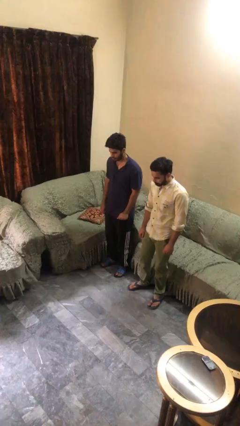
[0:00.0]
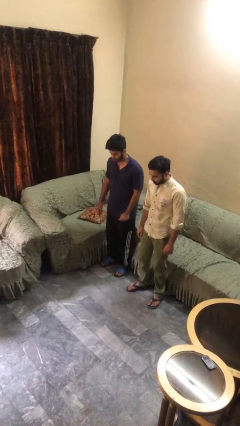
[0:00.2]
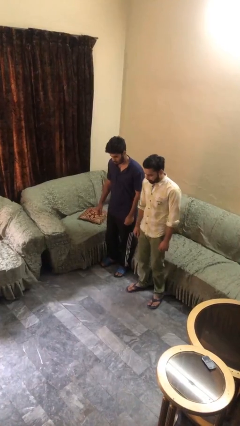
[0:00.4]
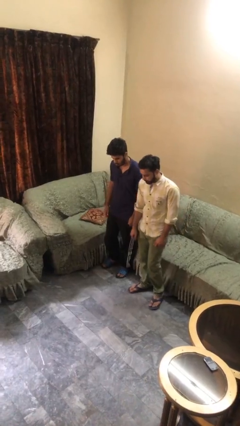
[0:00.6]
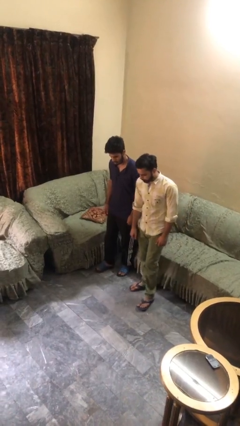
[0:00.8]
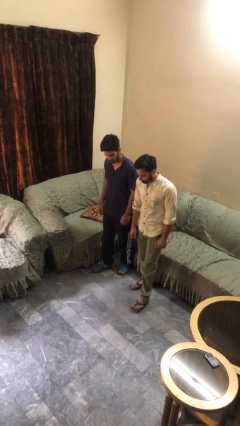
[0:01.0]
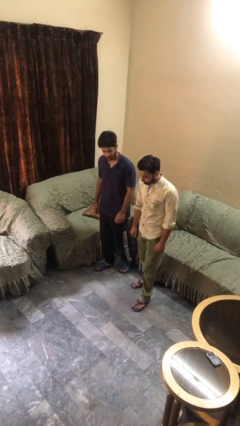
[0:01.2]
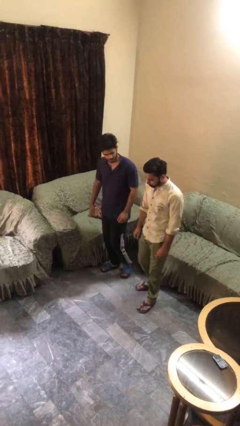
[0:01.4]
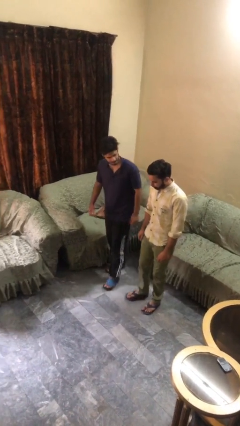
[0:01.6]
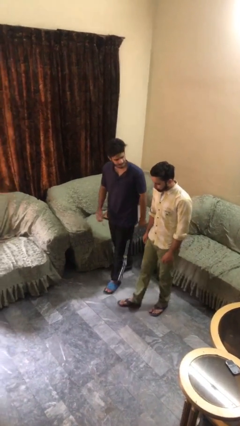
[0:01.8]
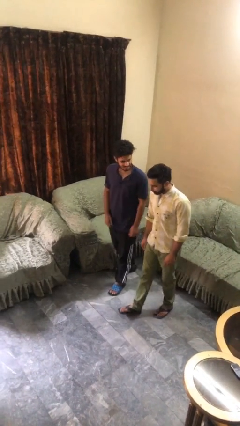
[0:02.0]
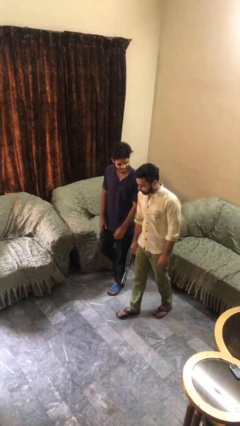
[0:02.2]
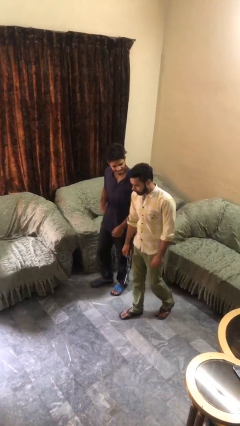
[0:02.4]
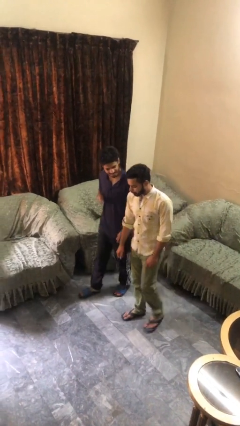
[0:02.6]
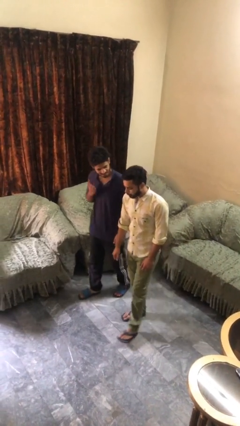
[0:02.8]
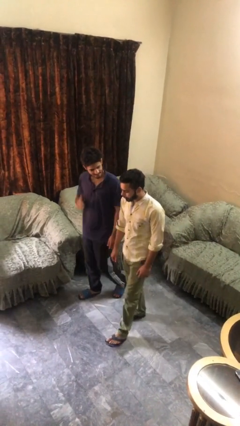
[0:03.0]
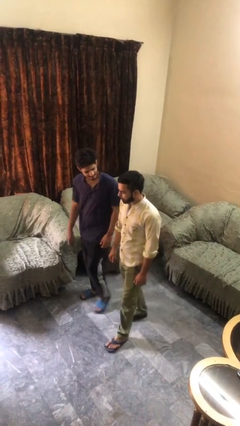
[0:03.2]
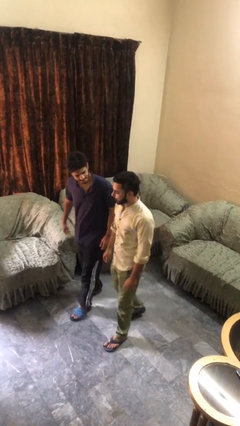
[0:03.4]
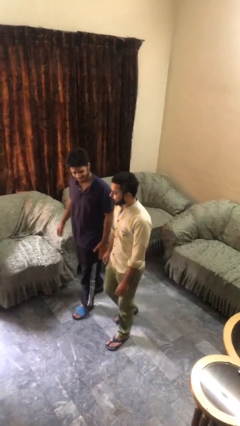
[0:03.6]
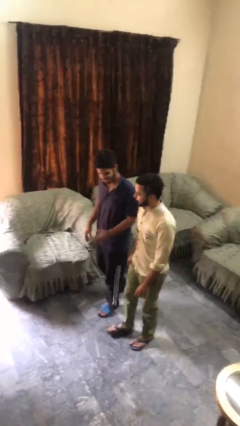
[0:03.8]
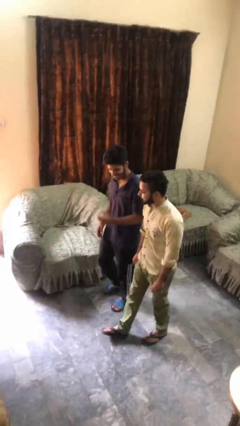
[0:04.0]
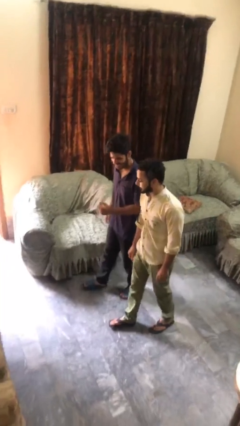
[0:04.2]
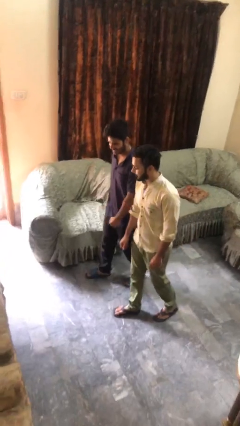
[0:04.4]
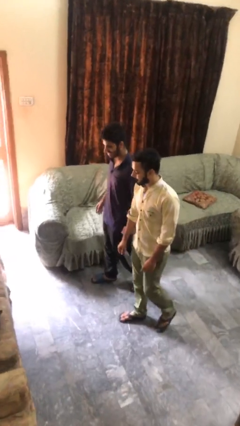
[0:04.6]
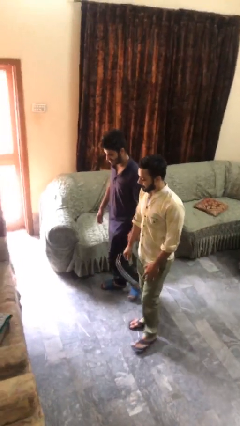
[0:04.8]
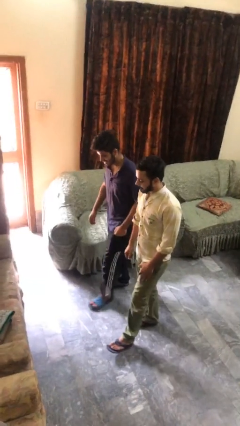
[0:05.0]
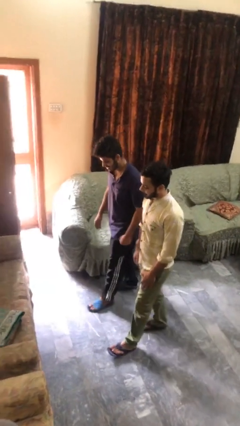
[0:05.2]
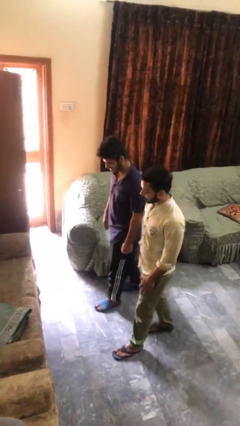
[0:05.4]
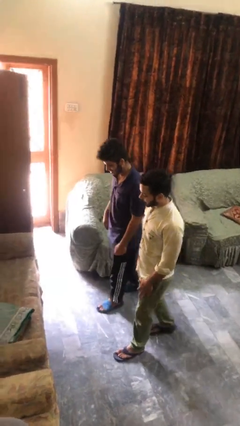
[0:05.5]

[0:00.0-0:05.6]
person talks to person

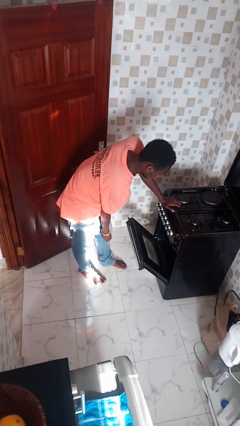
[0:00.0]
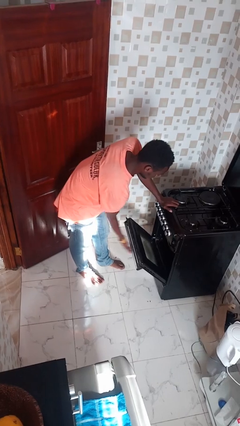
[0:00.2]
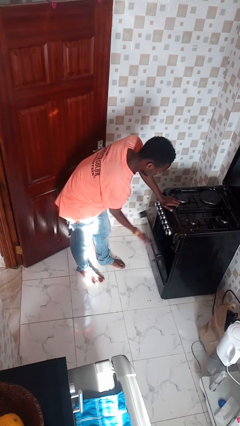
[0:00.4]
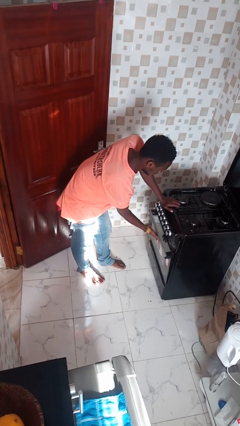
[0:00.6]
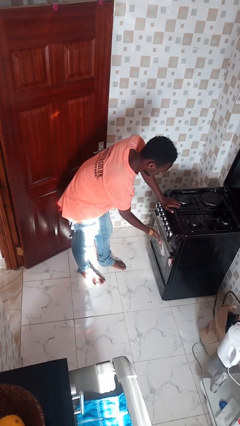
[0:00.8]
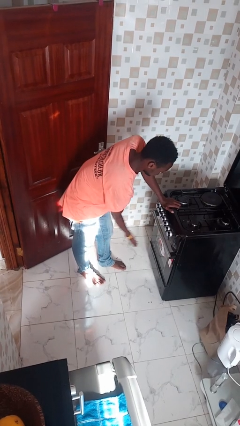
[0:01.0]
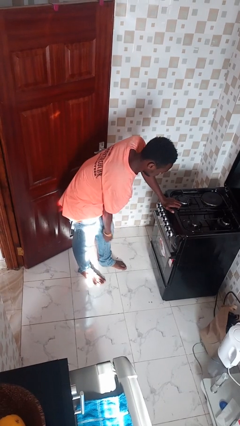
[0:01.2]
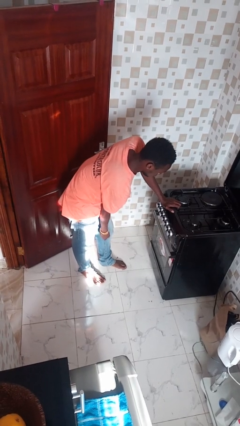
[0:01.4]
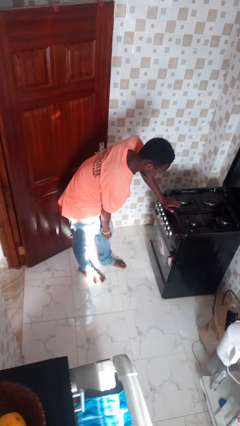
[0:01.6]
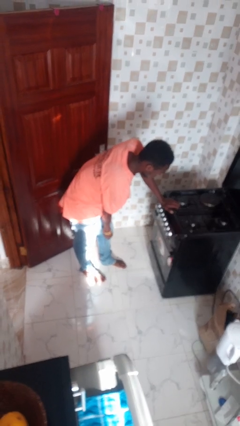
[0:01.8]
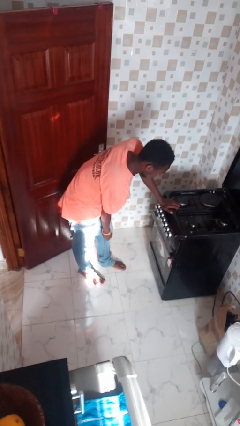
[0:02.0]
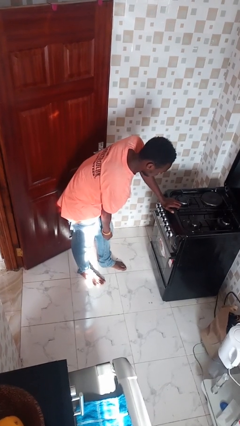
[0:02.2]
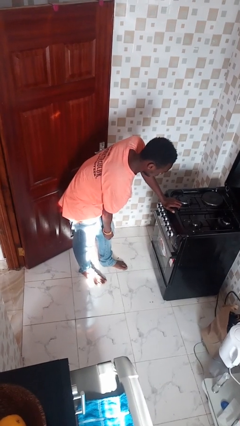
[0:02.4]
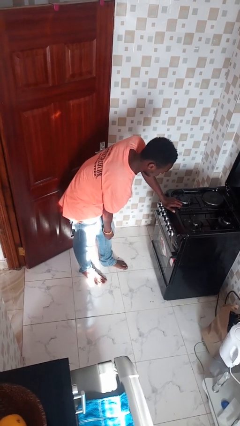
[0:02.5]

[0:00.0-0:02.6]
person closes oven door

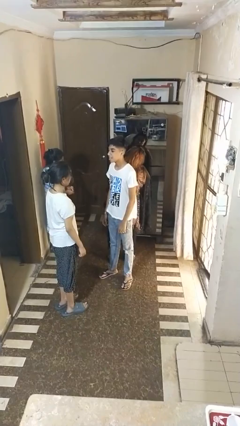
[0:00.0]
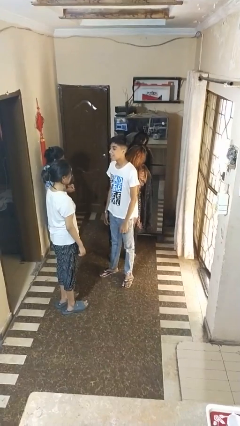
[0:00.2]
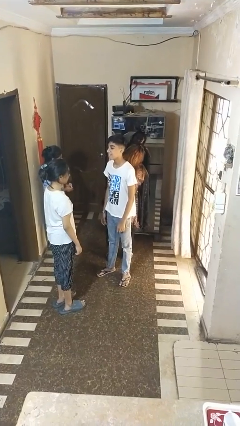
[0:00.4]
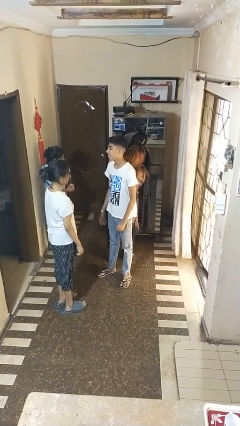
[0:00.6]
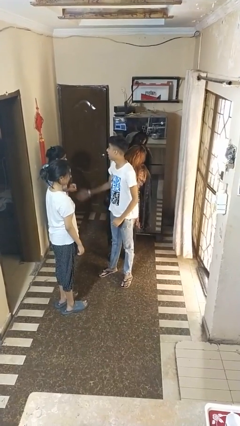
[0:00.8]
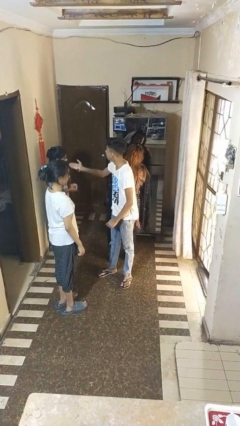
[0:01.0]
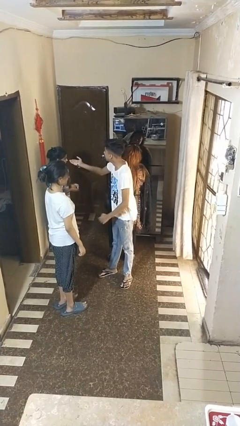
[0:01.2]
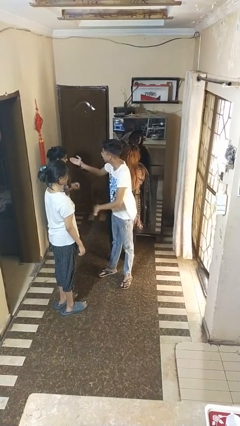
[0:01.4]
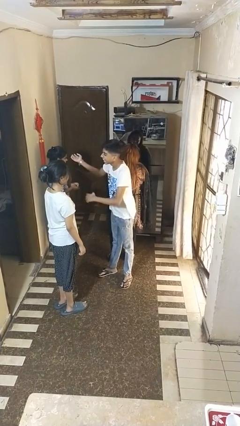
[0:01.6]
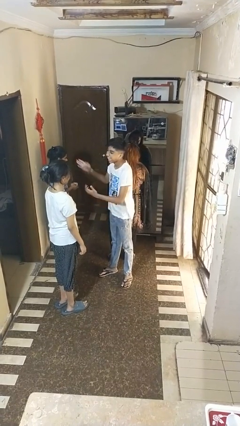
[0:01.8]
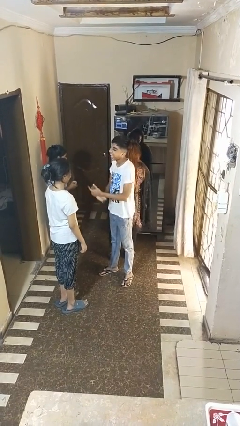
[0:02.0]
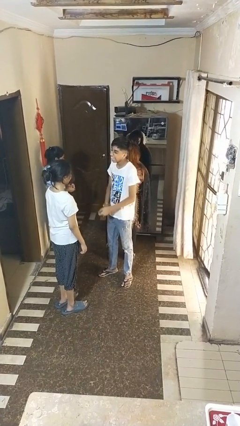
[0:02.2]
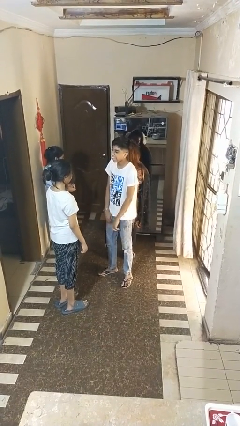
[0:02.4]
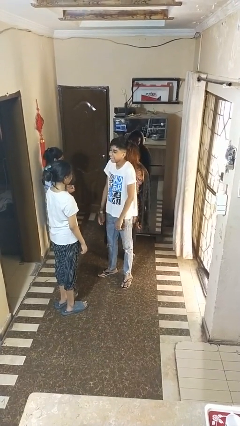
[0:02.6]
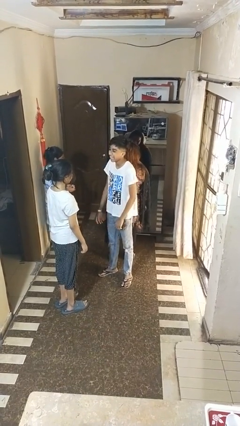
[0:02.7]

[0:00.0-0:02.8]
person laughs with person

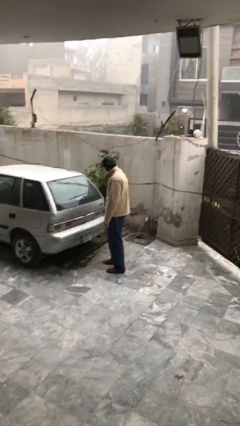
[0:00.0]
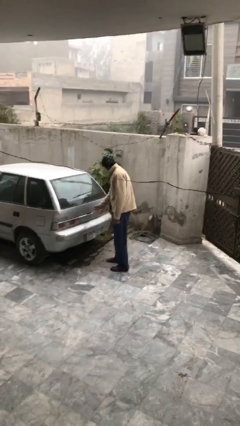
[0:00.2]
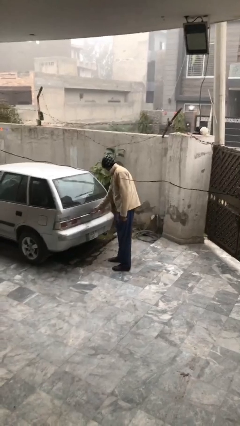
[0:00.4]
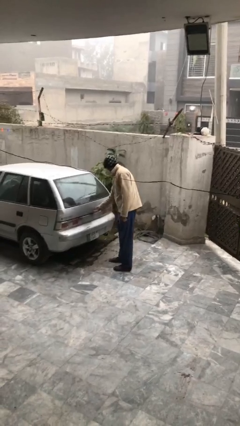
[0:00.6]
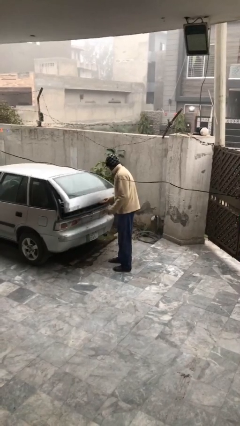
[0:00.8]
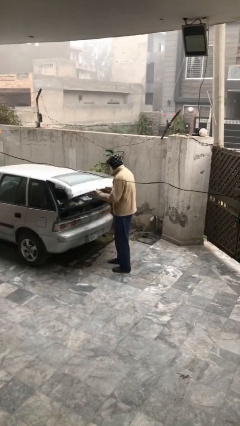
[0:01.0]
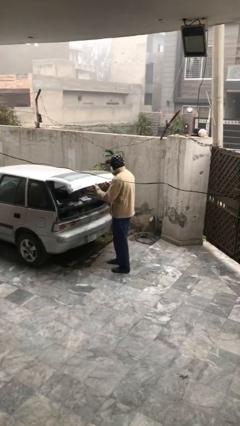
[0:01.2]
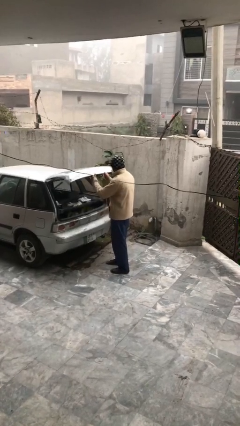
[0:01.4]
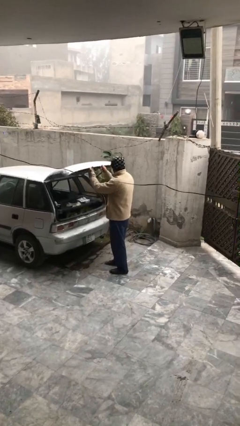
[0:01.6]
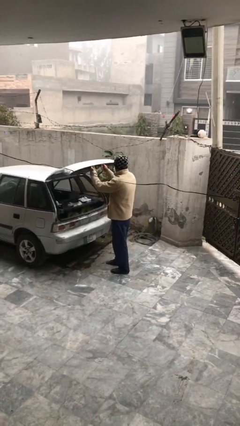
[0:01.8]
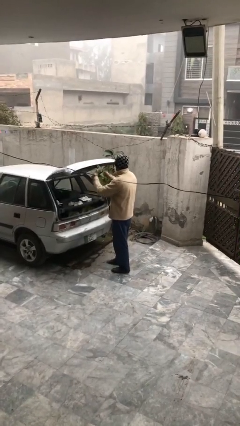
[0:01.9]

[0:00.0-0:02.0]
person opens car trunk

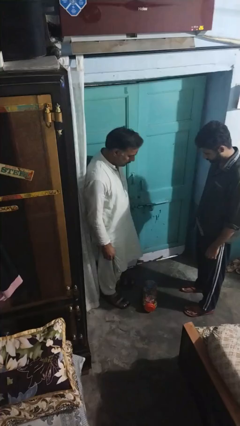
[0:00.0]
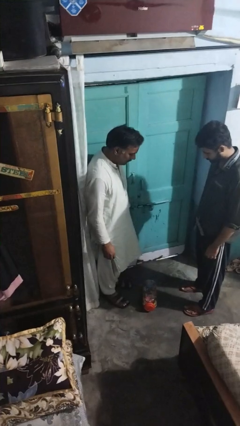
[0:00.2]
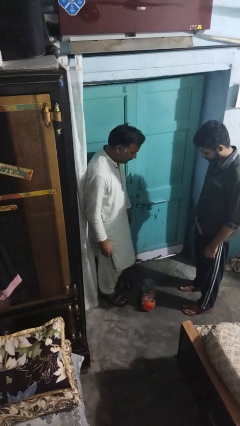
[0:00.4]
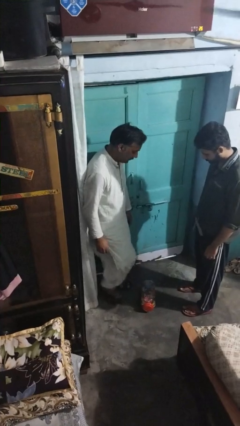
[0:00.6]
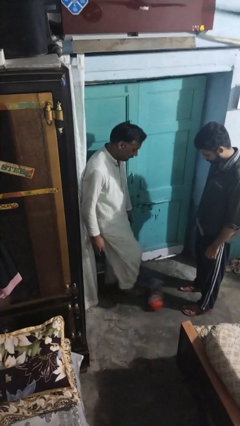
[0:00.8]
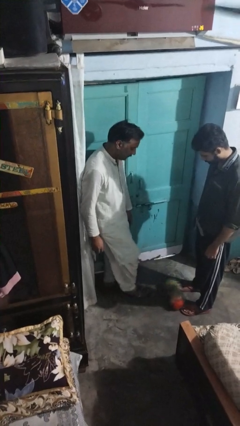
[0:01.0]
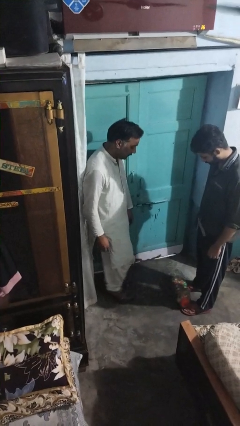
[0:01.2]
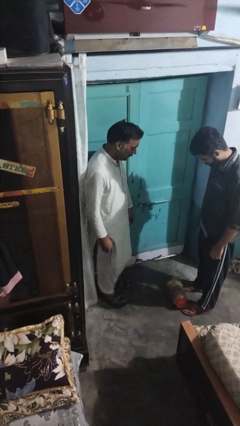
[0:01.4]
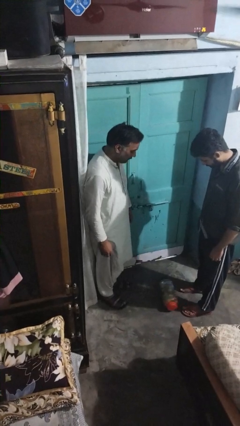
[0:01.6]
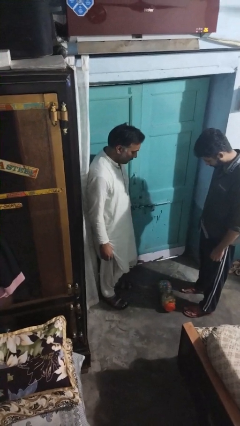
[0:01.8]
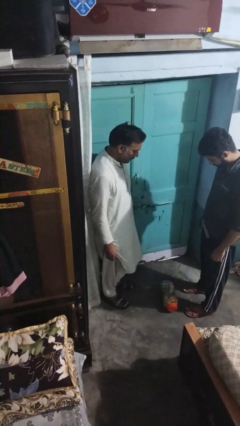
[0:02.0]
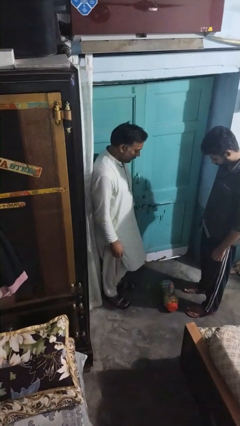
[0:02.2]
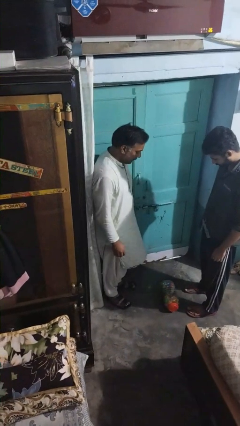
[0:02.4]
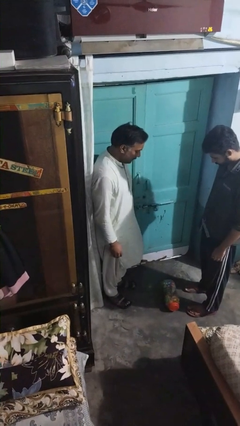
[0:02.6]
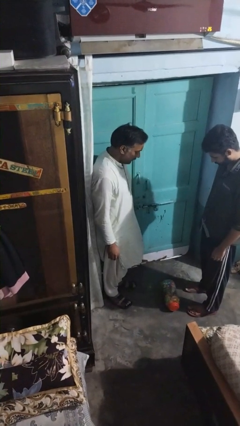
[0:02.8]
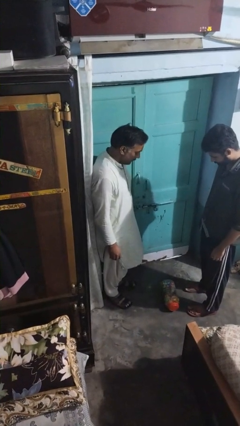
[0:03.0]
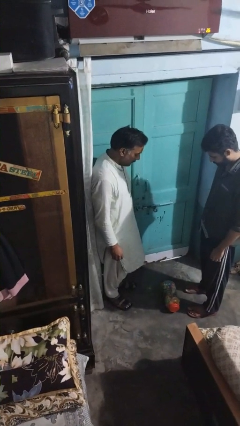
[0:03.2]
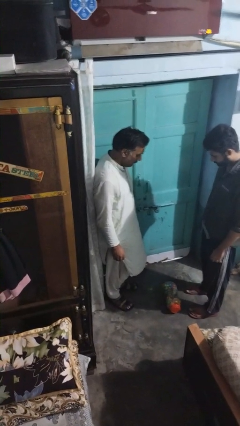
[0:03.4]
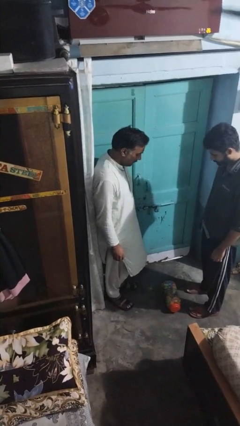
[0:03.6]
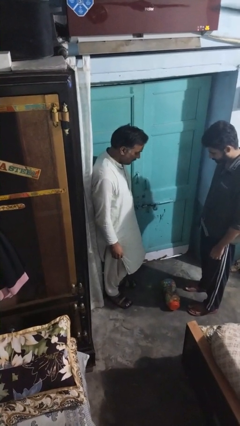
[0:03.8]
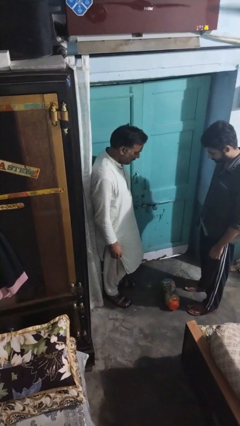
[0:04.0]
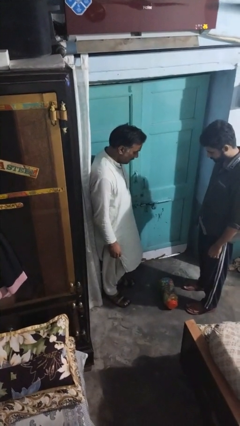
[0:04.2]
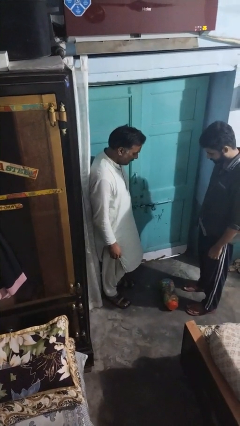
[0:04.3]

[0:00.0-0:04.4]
person kicks object to person

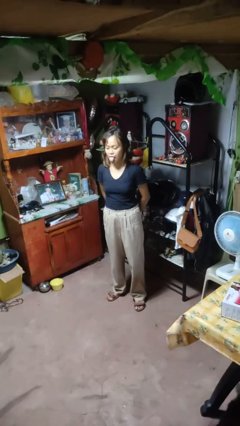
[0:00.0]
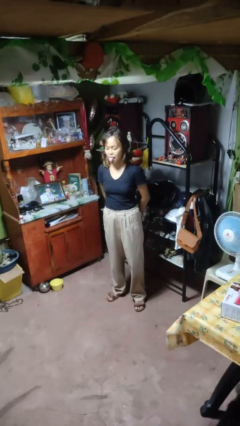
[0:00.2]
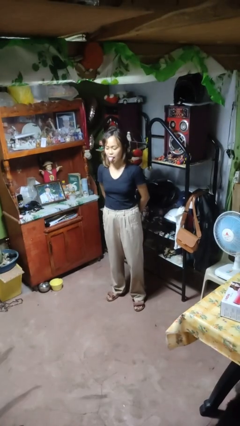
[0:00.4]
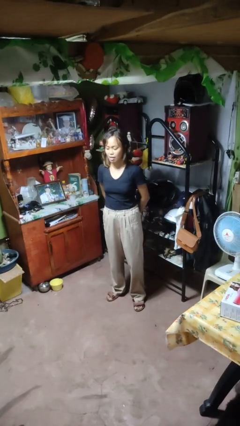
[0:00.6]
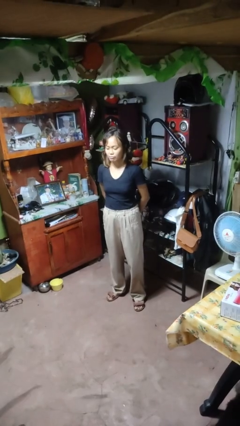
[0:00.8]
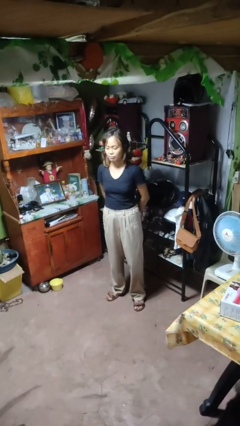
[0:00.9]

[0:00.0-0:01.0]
person sticks out tongue
